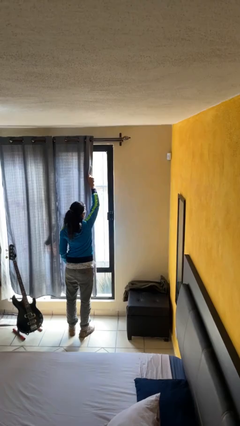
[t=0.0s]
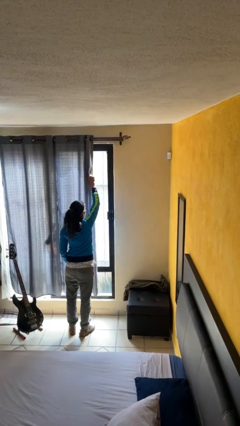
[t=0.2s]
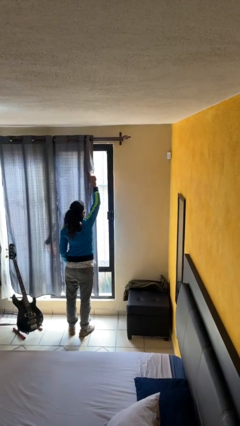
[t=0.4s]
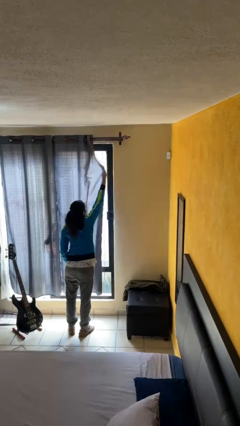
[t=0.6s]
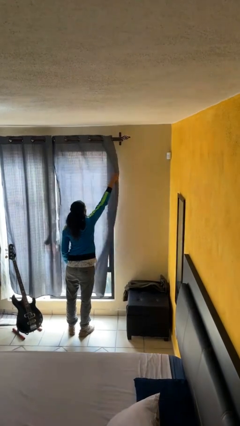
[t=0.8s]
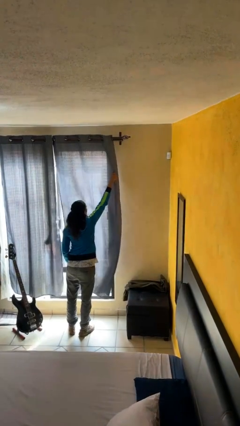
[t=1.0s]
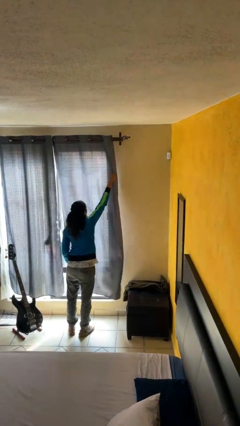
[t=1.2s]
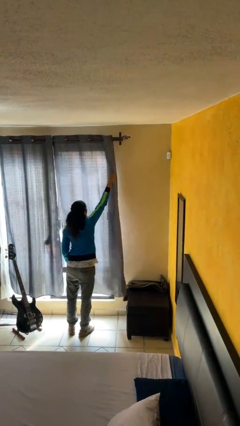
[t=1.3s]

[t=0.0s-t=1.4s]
person closes curtains

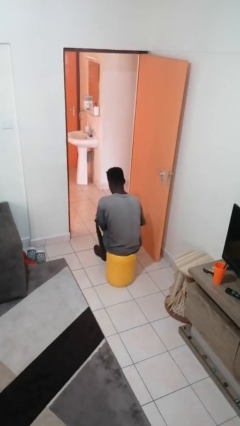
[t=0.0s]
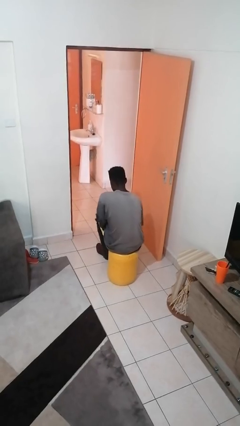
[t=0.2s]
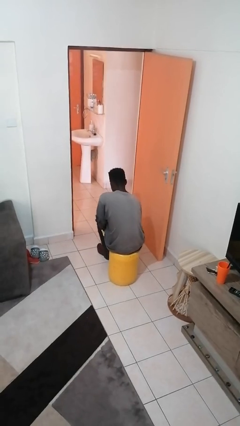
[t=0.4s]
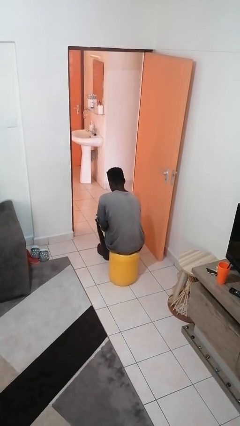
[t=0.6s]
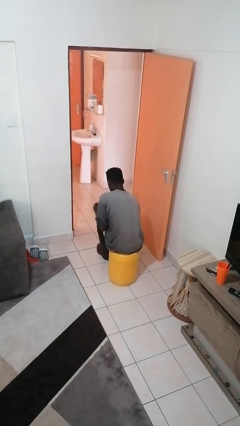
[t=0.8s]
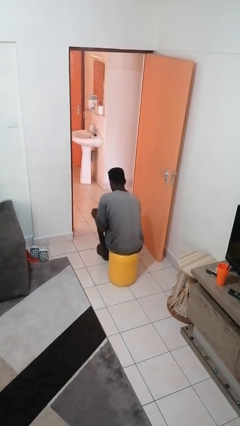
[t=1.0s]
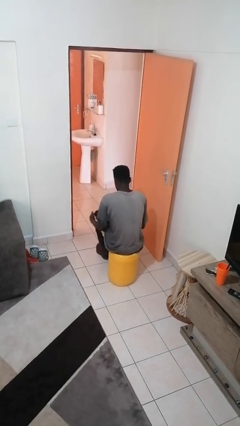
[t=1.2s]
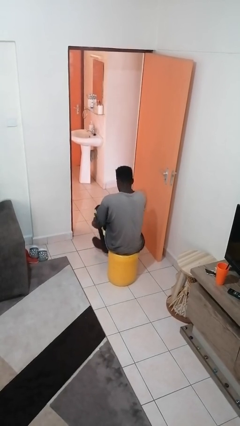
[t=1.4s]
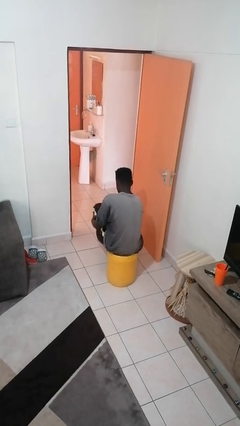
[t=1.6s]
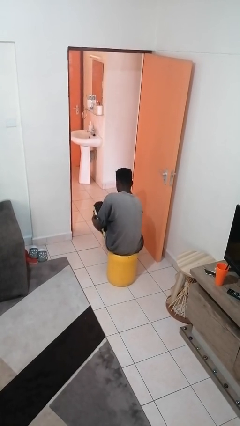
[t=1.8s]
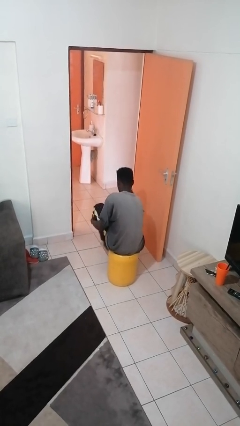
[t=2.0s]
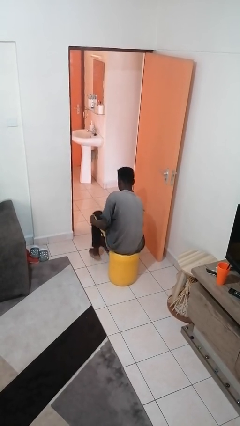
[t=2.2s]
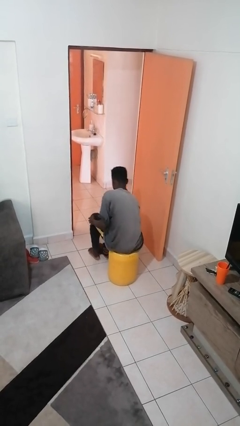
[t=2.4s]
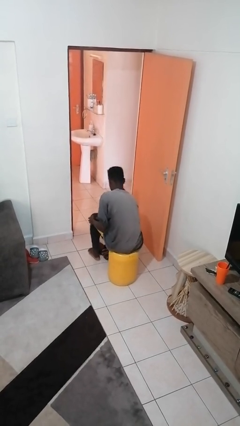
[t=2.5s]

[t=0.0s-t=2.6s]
person takes off shoes

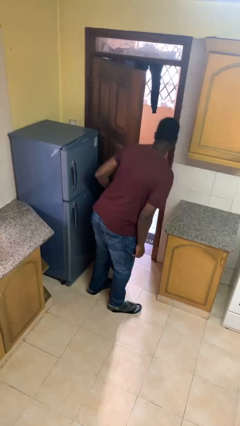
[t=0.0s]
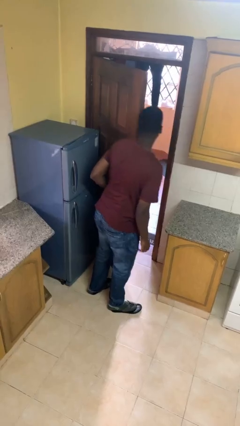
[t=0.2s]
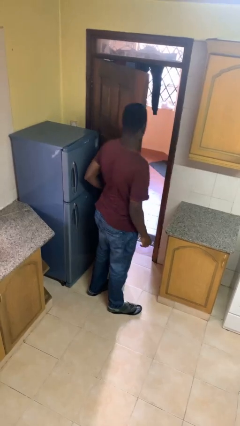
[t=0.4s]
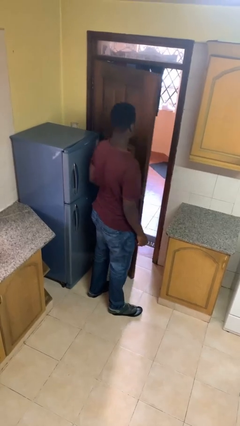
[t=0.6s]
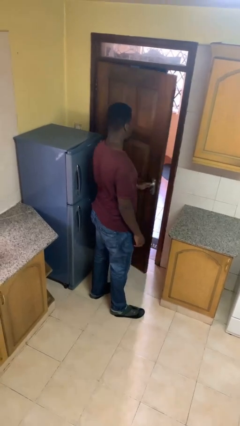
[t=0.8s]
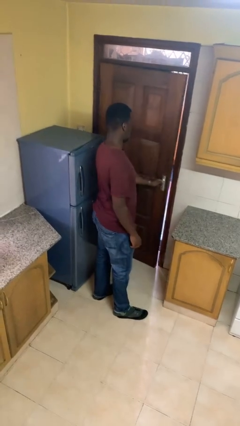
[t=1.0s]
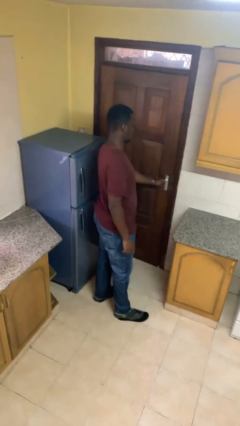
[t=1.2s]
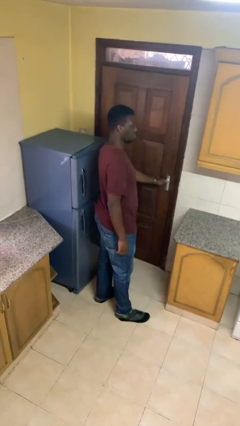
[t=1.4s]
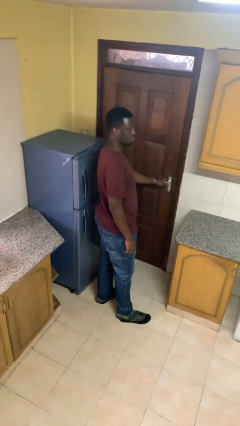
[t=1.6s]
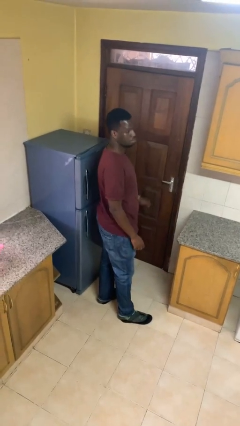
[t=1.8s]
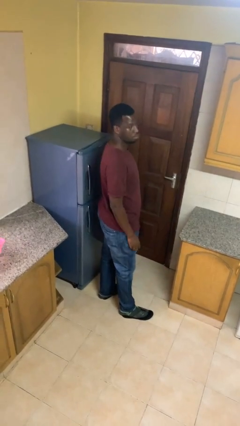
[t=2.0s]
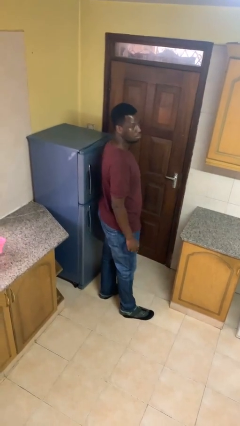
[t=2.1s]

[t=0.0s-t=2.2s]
person closes facility door

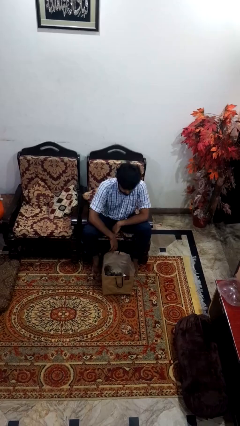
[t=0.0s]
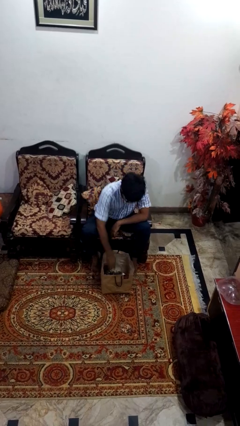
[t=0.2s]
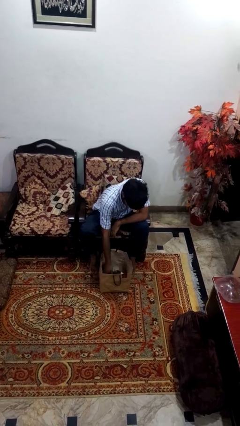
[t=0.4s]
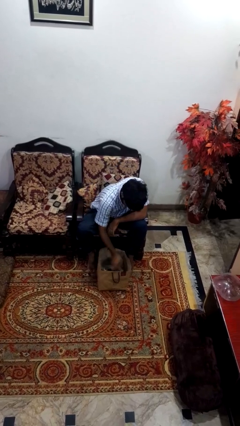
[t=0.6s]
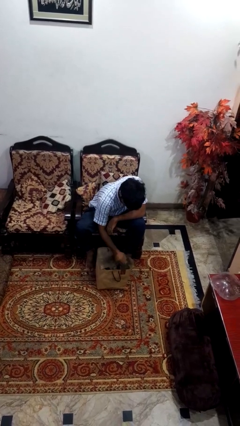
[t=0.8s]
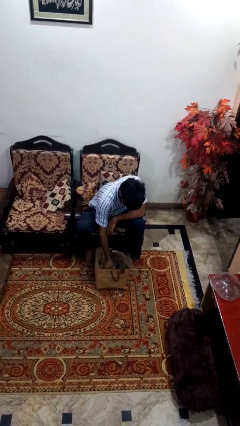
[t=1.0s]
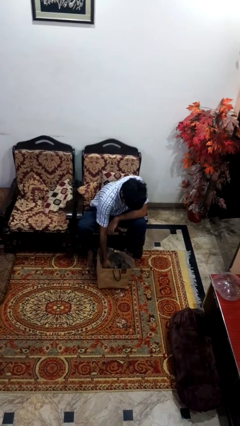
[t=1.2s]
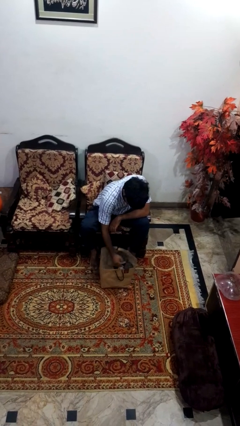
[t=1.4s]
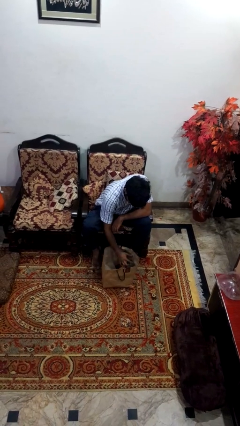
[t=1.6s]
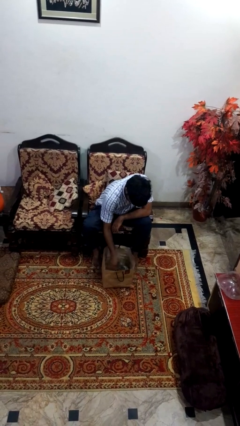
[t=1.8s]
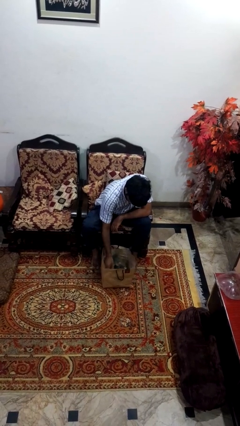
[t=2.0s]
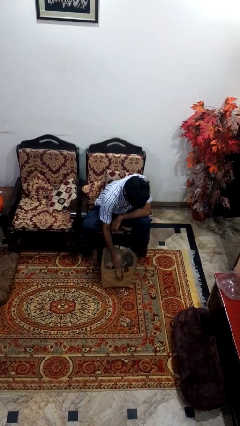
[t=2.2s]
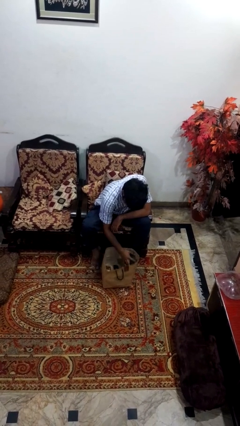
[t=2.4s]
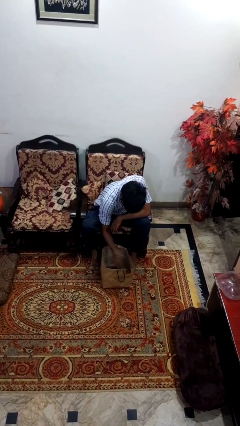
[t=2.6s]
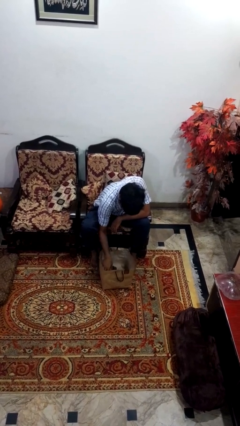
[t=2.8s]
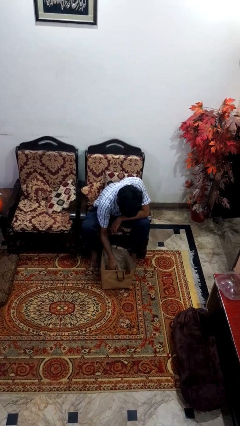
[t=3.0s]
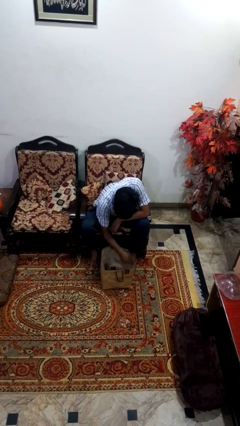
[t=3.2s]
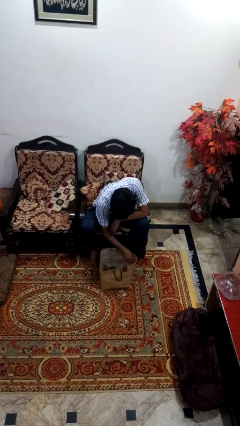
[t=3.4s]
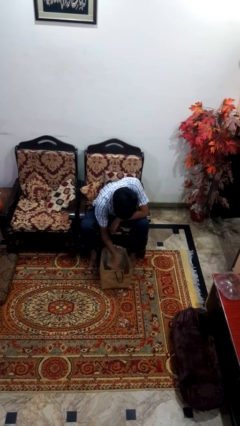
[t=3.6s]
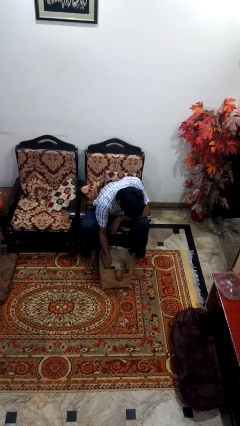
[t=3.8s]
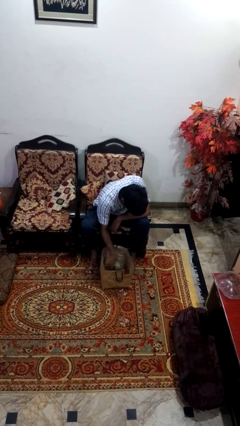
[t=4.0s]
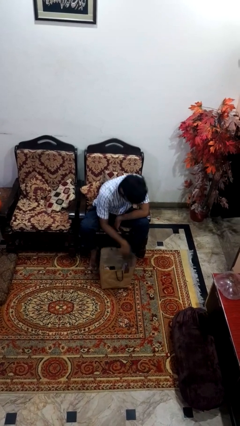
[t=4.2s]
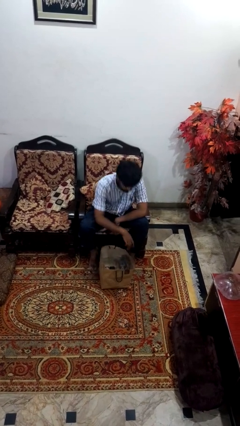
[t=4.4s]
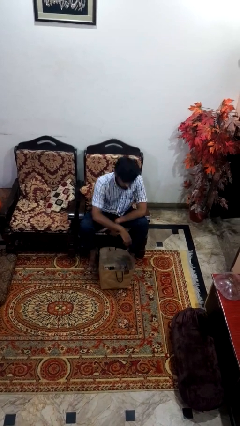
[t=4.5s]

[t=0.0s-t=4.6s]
person searches in bag

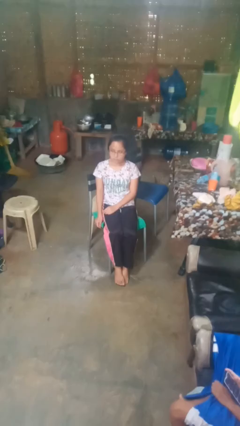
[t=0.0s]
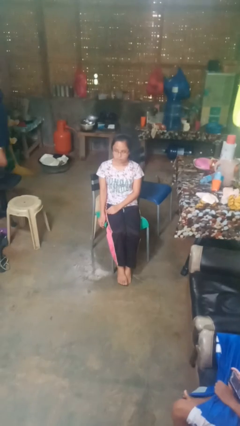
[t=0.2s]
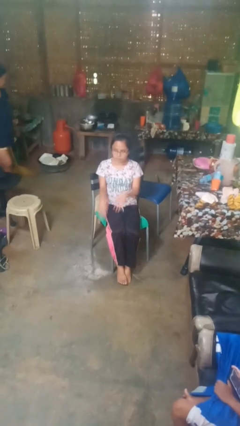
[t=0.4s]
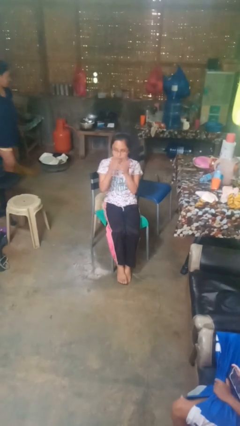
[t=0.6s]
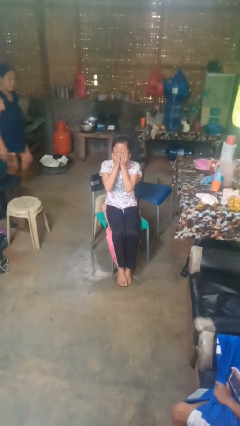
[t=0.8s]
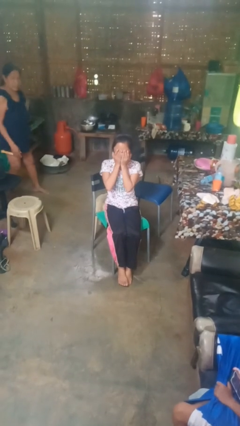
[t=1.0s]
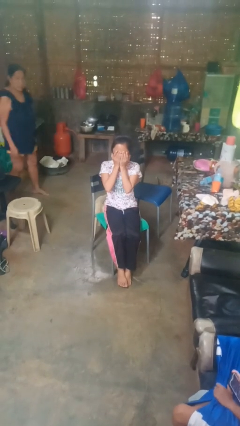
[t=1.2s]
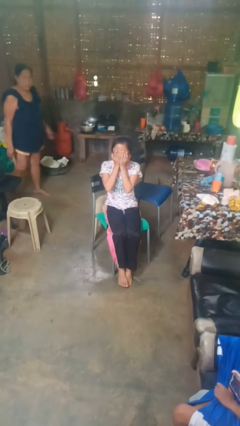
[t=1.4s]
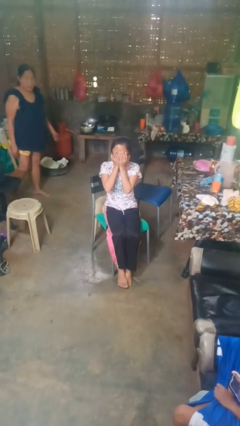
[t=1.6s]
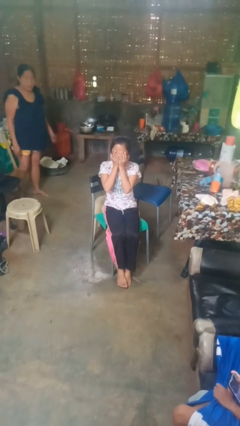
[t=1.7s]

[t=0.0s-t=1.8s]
person covers face with hands

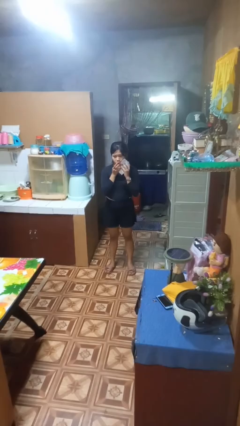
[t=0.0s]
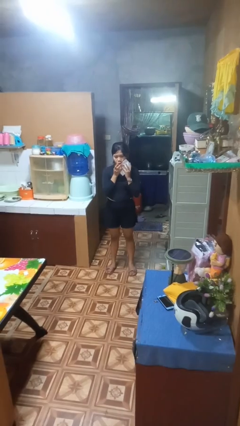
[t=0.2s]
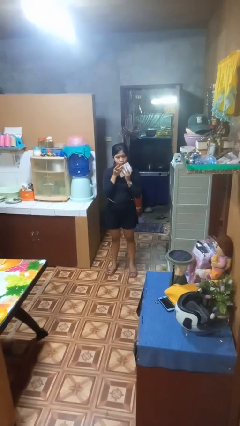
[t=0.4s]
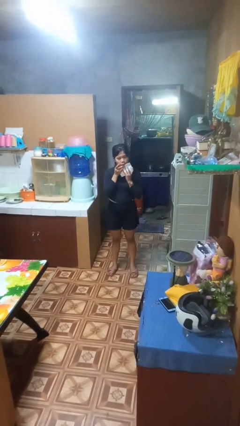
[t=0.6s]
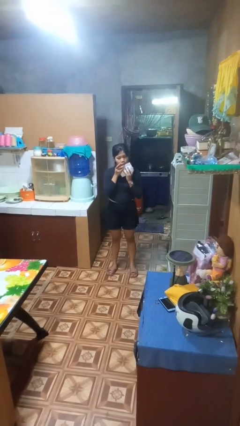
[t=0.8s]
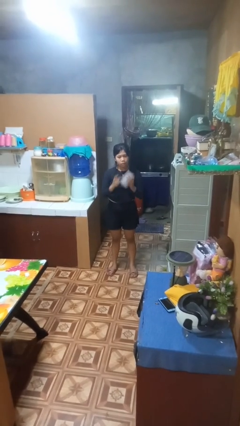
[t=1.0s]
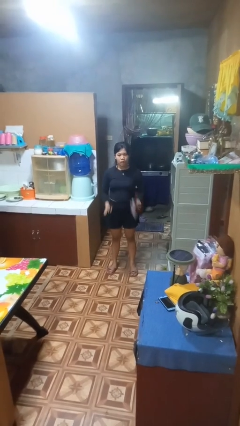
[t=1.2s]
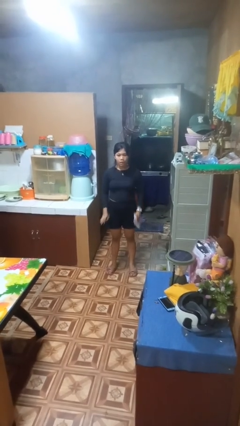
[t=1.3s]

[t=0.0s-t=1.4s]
person wipes mouth with napkin

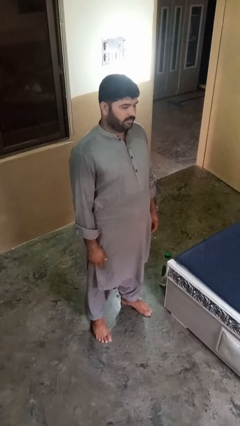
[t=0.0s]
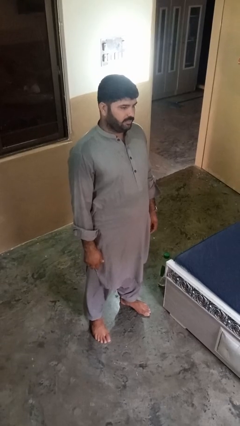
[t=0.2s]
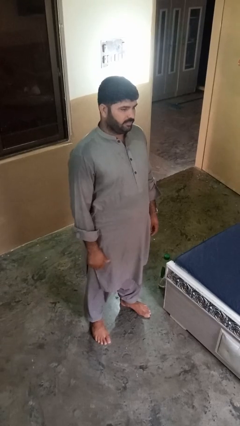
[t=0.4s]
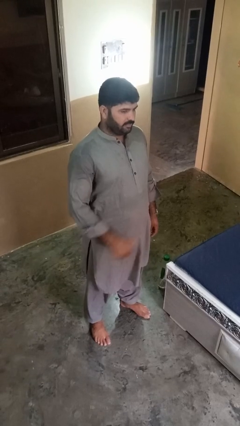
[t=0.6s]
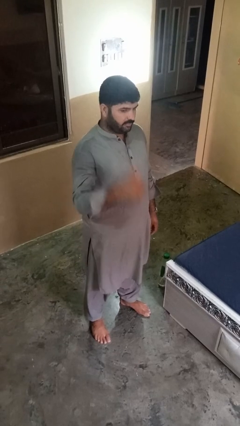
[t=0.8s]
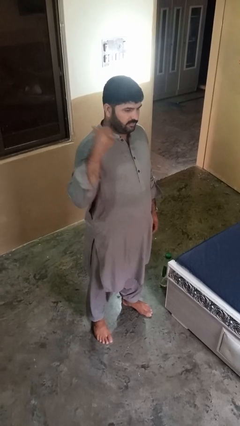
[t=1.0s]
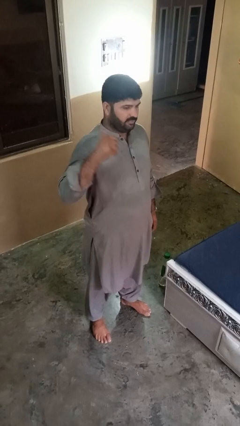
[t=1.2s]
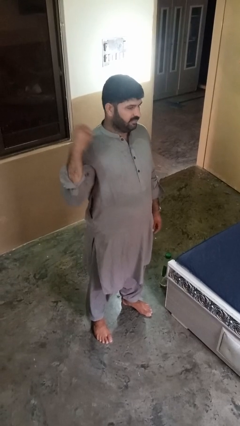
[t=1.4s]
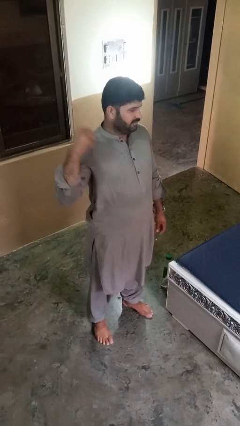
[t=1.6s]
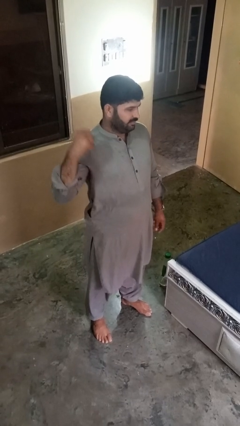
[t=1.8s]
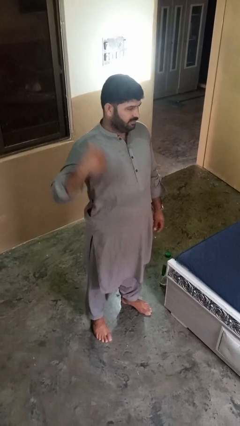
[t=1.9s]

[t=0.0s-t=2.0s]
person gestures behind me

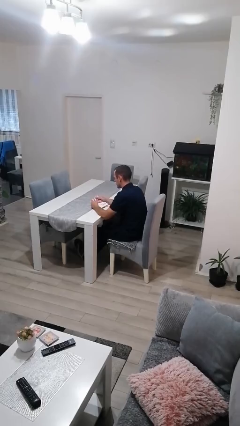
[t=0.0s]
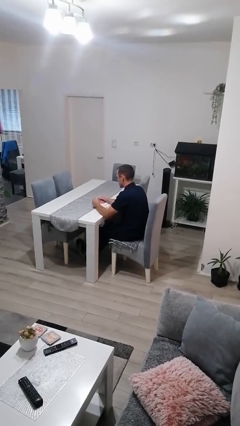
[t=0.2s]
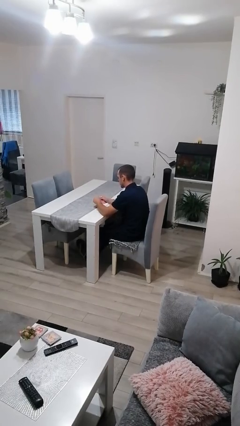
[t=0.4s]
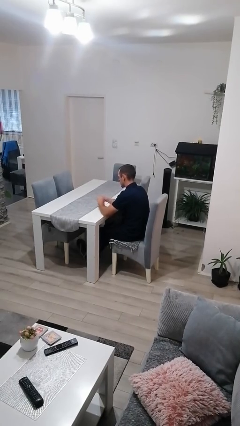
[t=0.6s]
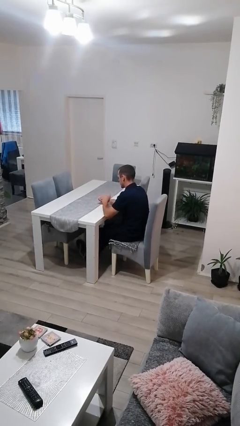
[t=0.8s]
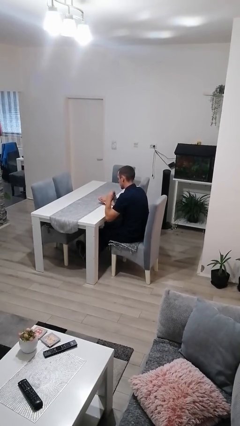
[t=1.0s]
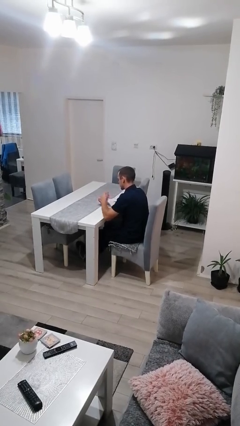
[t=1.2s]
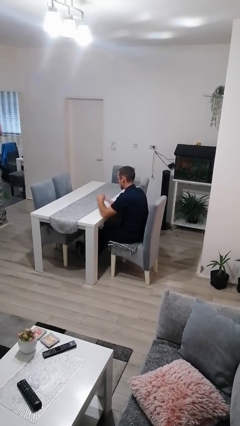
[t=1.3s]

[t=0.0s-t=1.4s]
person tears paper
